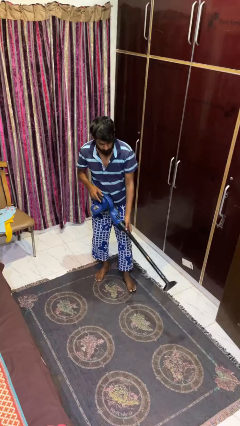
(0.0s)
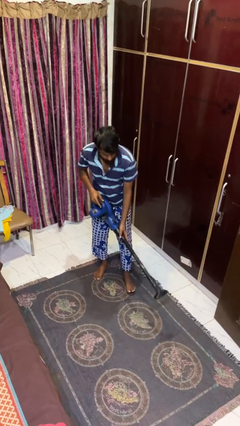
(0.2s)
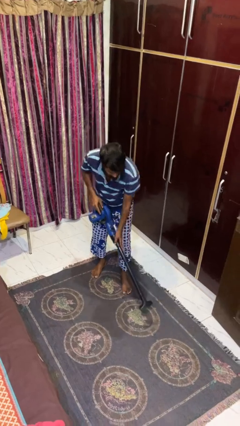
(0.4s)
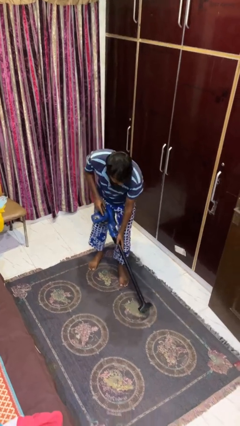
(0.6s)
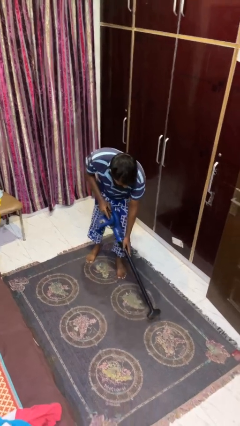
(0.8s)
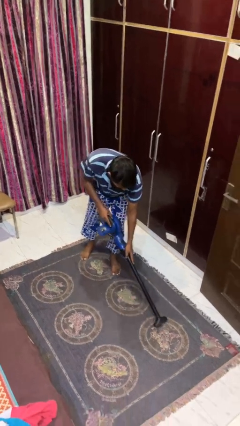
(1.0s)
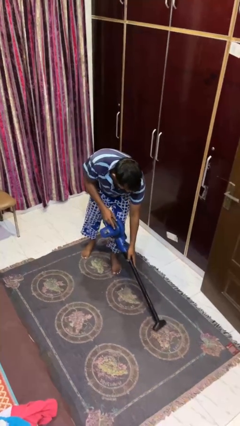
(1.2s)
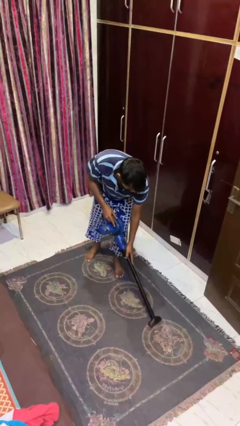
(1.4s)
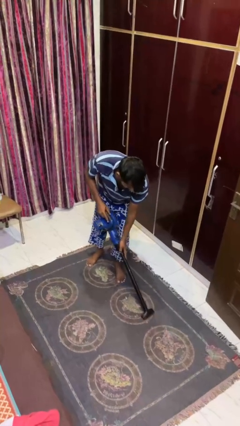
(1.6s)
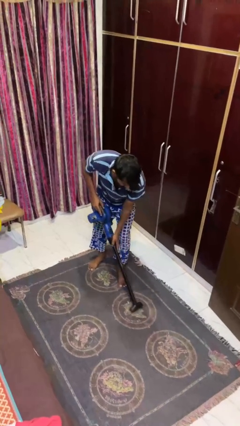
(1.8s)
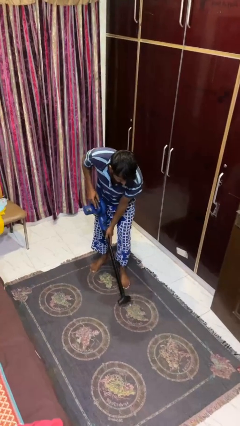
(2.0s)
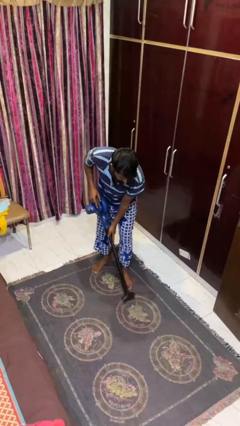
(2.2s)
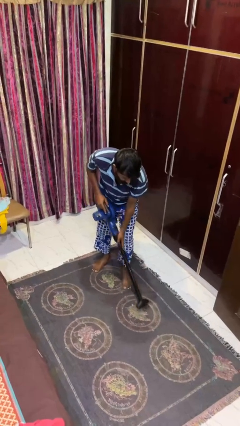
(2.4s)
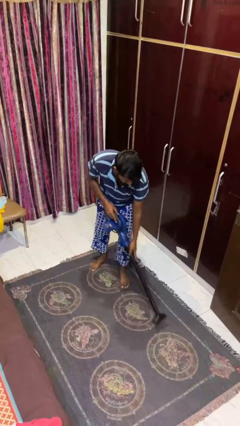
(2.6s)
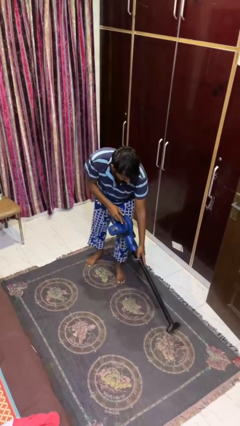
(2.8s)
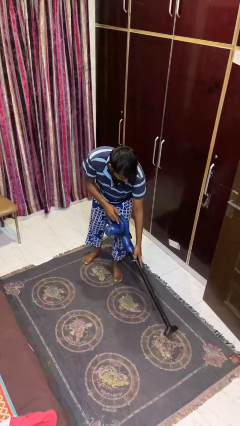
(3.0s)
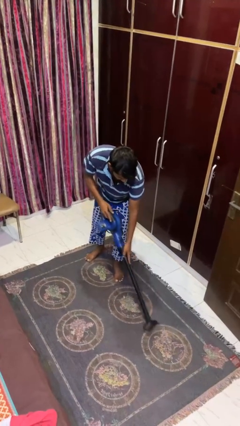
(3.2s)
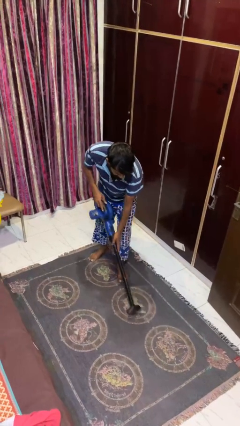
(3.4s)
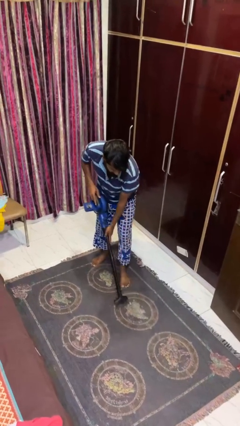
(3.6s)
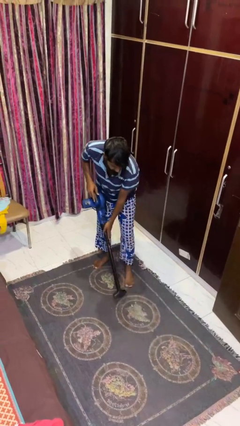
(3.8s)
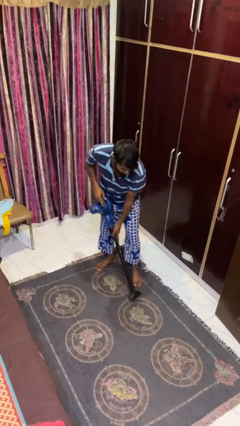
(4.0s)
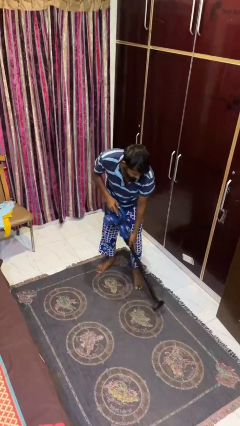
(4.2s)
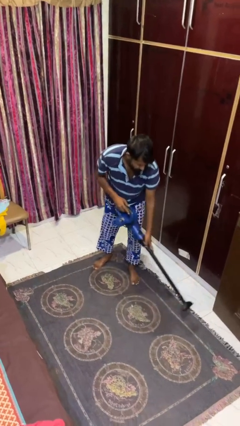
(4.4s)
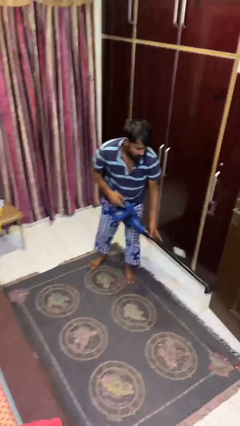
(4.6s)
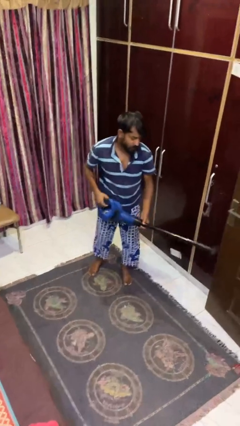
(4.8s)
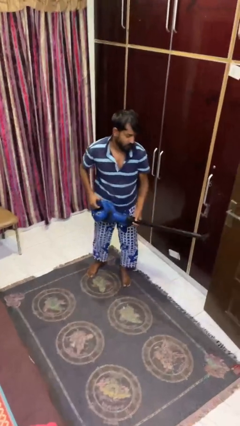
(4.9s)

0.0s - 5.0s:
person vacuums carpet

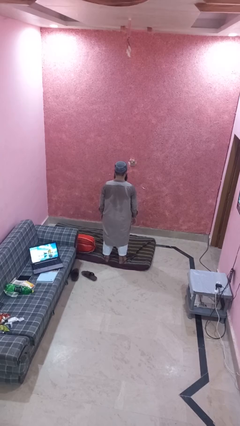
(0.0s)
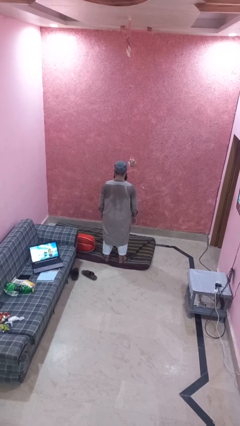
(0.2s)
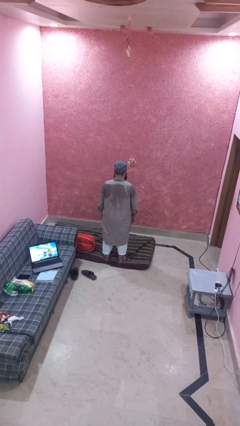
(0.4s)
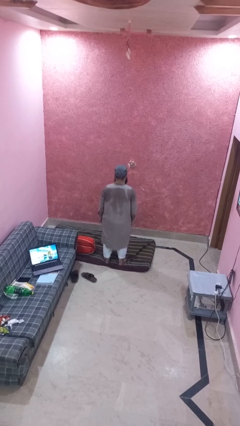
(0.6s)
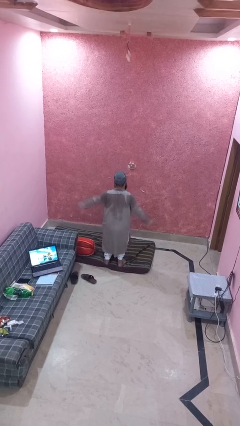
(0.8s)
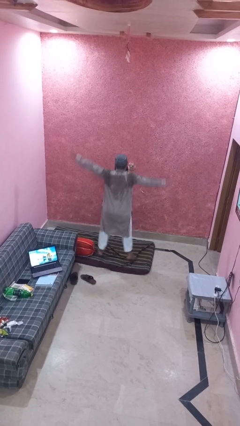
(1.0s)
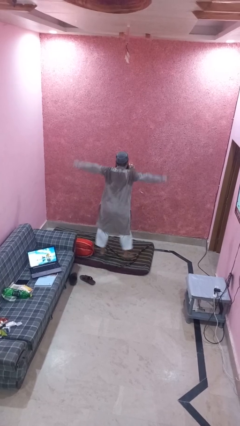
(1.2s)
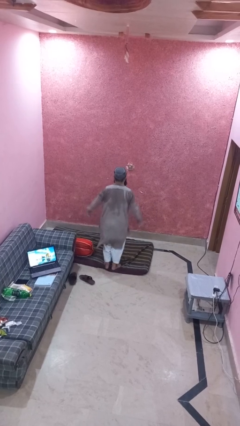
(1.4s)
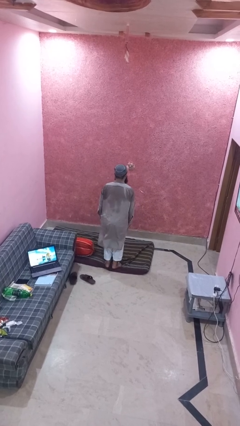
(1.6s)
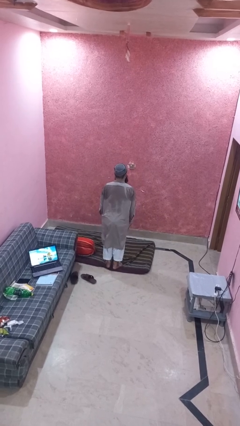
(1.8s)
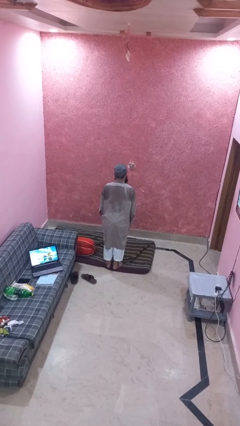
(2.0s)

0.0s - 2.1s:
person exercises with jumping jacks

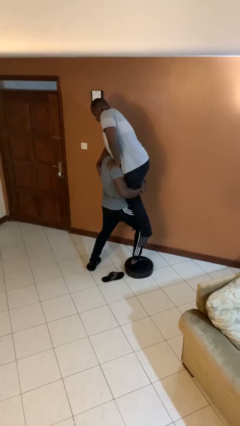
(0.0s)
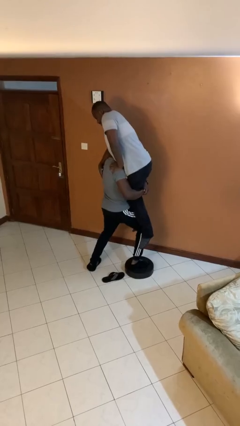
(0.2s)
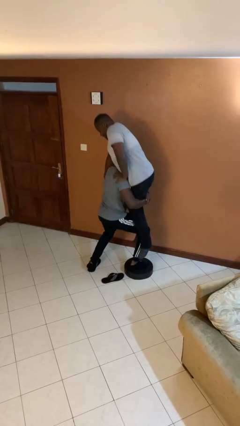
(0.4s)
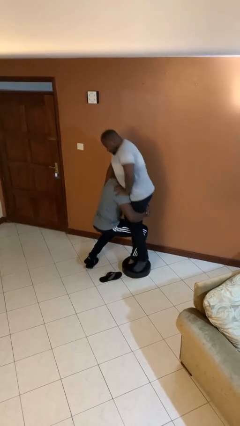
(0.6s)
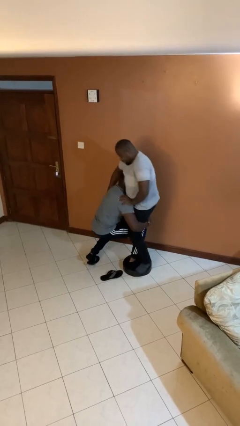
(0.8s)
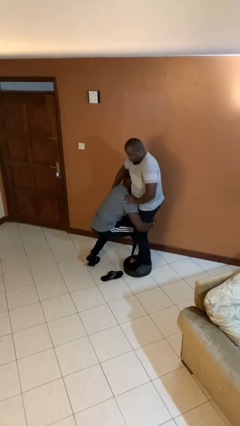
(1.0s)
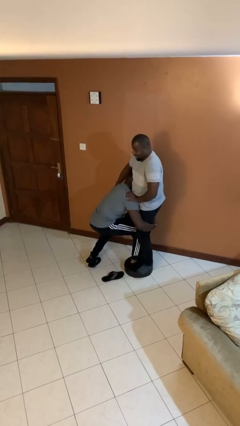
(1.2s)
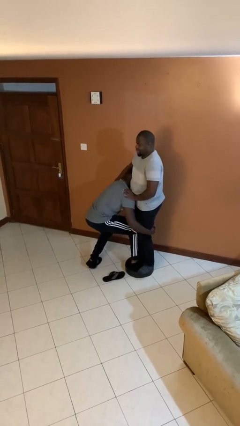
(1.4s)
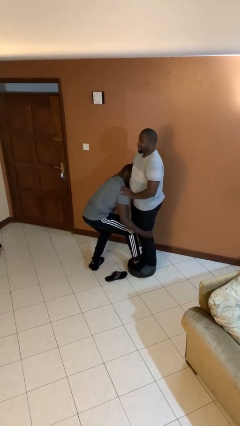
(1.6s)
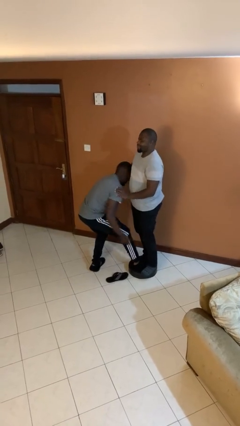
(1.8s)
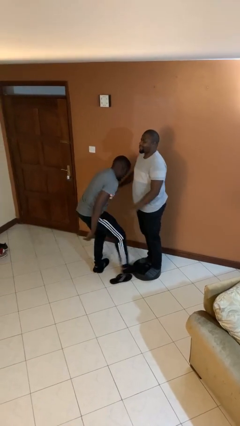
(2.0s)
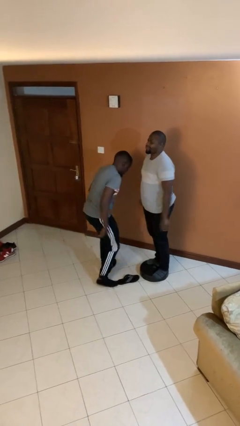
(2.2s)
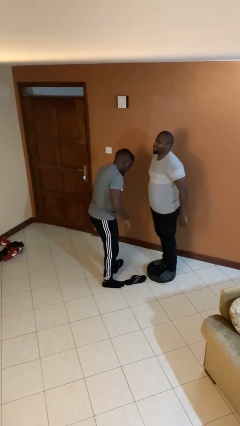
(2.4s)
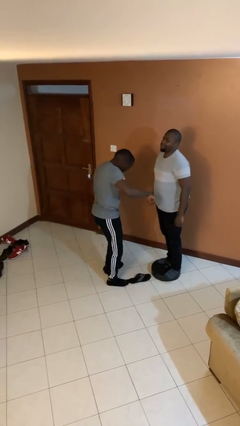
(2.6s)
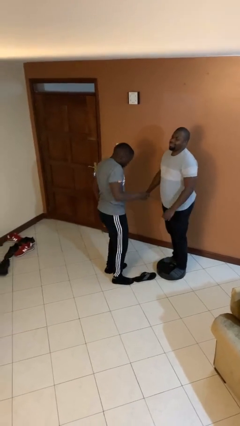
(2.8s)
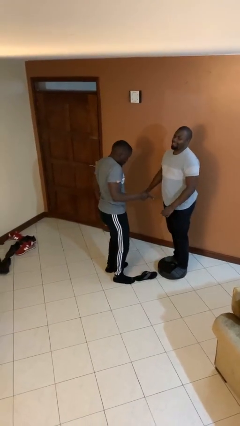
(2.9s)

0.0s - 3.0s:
person puts down person

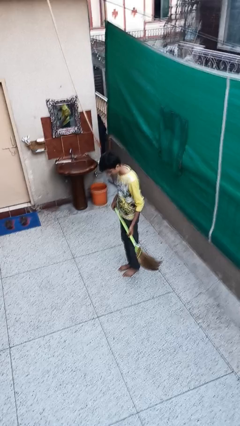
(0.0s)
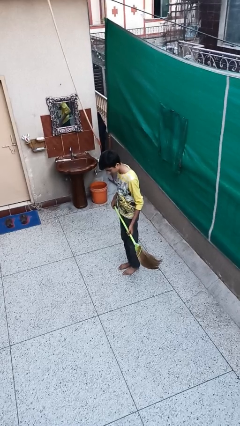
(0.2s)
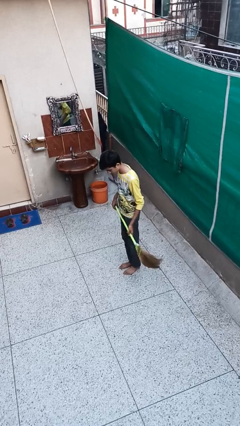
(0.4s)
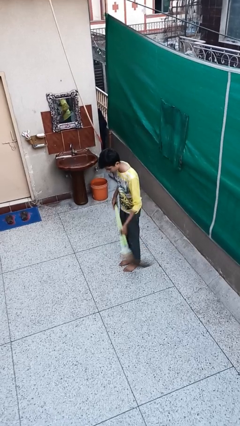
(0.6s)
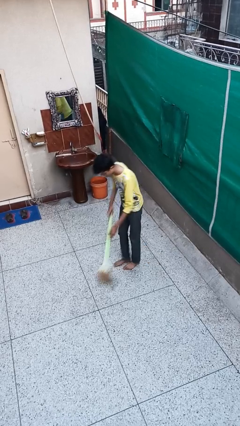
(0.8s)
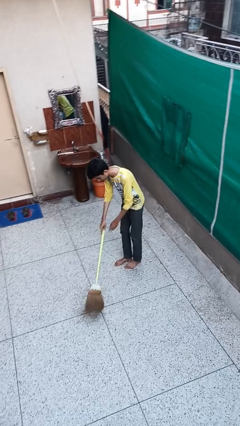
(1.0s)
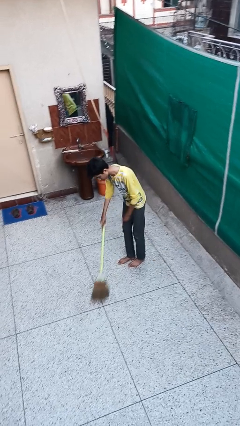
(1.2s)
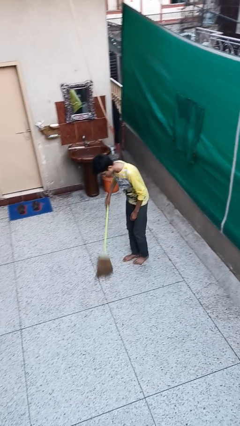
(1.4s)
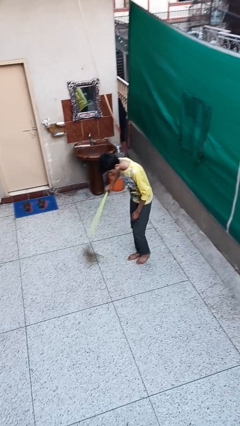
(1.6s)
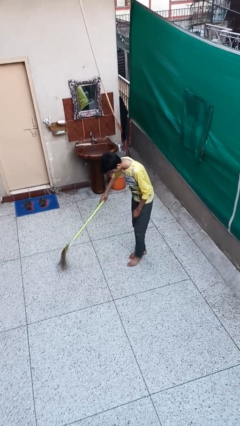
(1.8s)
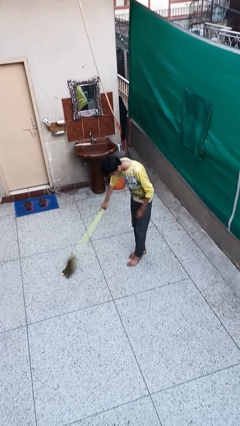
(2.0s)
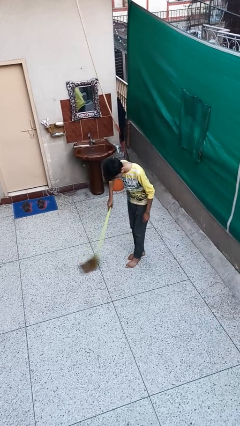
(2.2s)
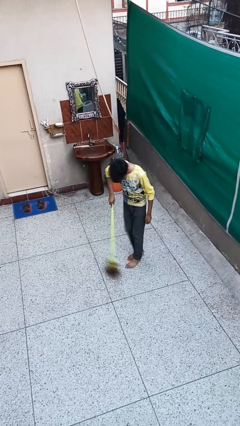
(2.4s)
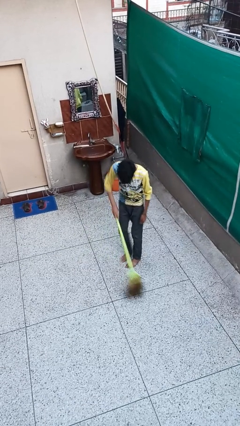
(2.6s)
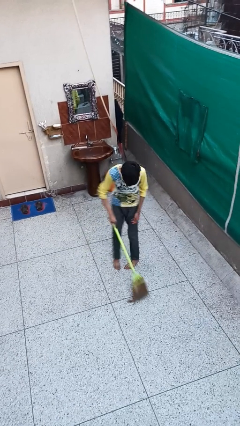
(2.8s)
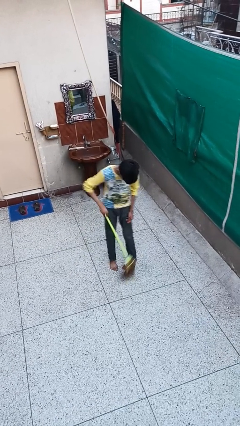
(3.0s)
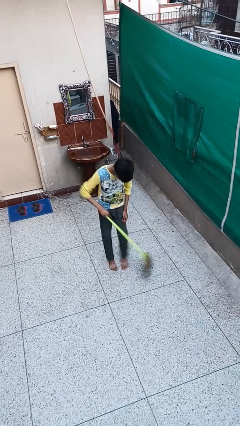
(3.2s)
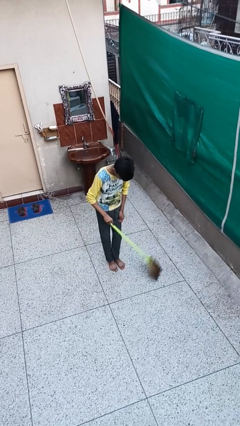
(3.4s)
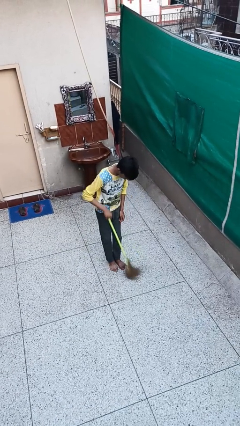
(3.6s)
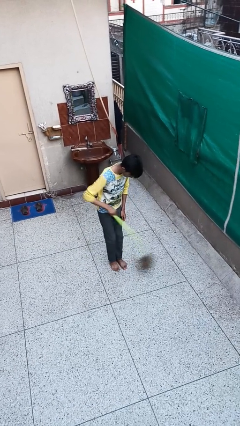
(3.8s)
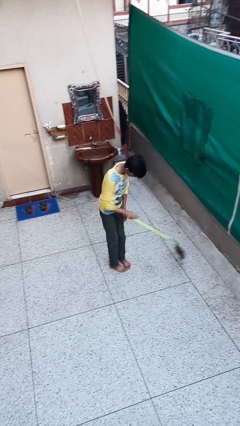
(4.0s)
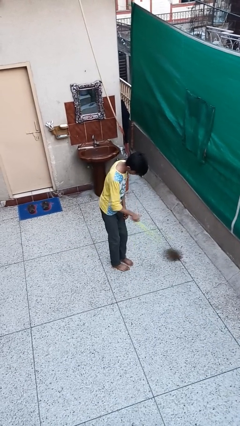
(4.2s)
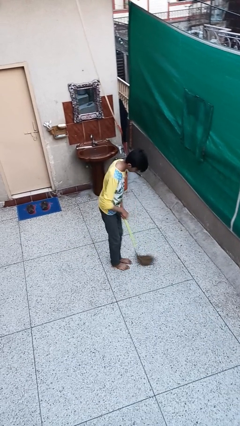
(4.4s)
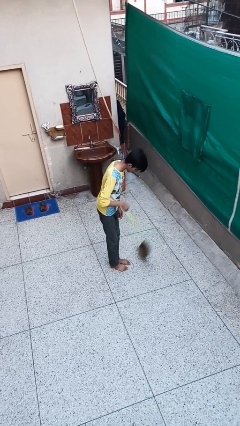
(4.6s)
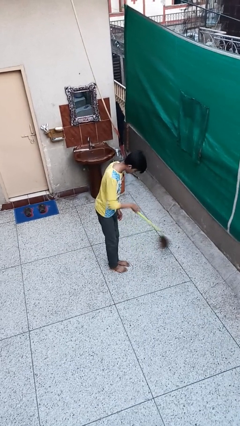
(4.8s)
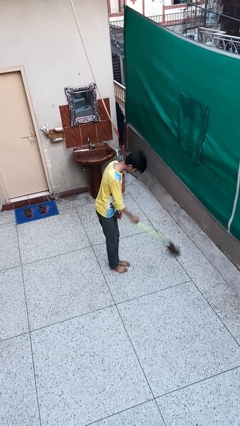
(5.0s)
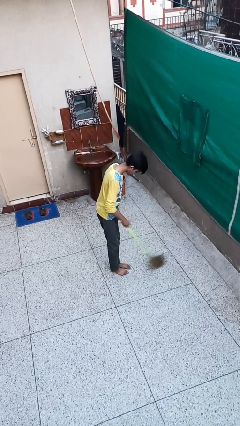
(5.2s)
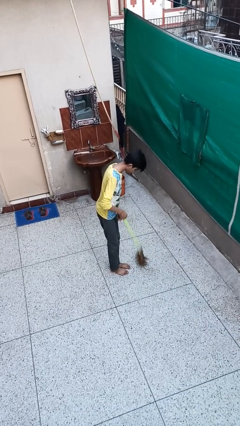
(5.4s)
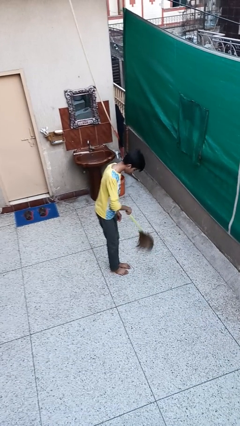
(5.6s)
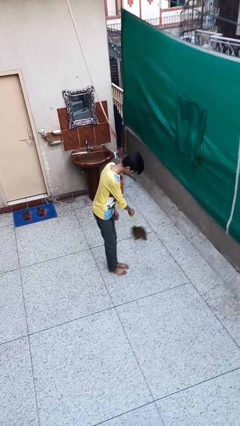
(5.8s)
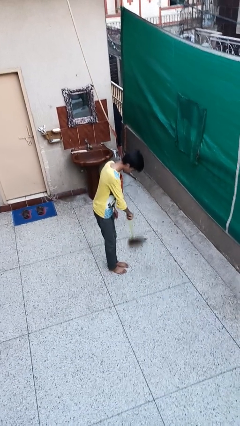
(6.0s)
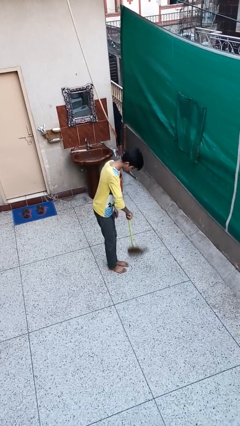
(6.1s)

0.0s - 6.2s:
person sweeps floor

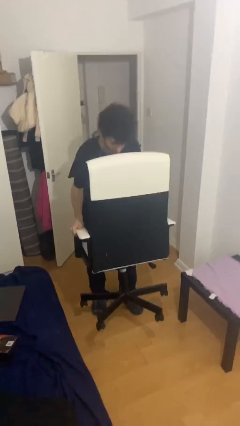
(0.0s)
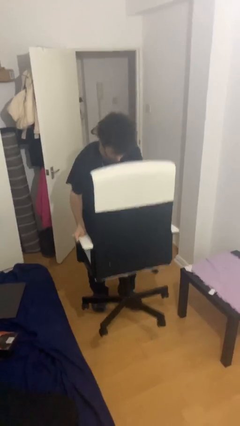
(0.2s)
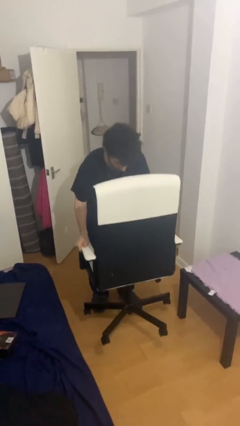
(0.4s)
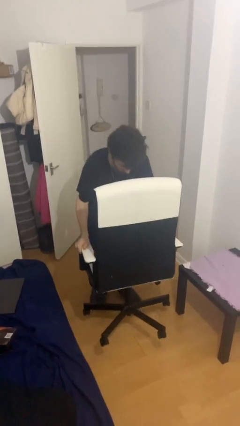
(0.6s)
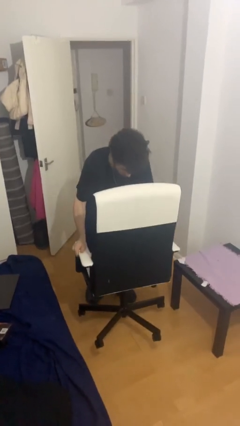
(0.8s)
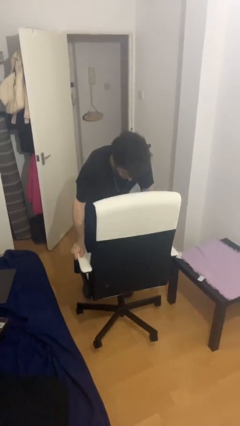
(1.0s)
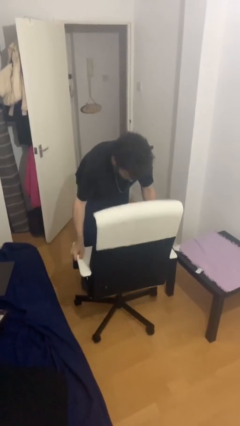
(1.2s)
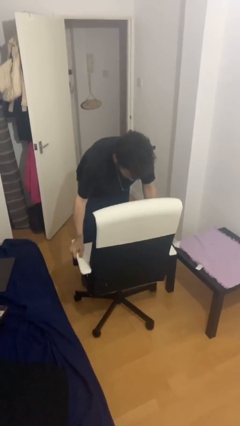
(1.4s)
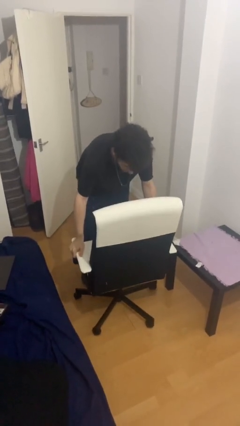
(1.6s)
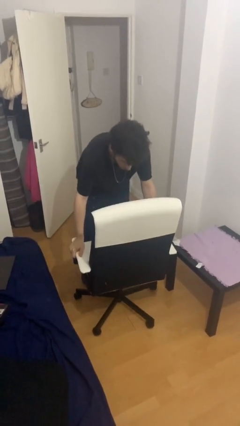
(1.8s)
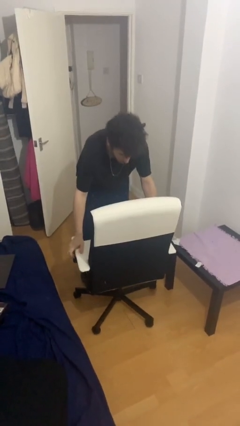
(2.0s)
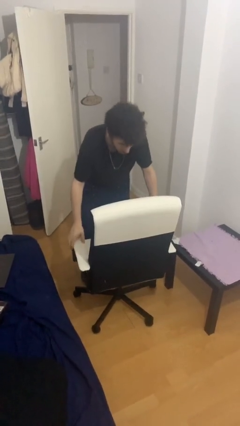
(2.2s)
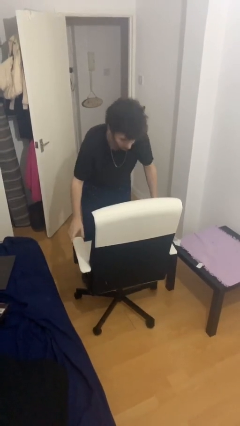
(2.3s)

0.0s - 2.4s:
person puts down object on floor
